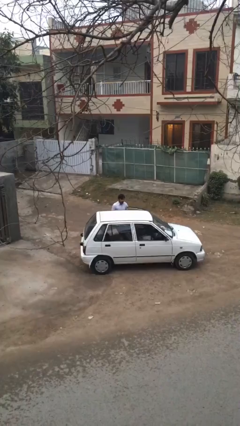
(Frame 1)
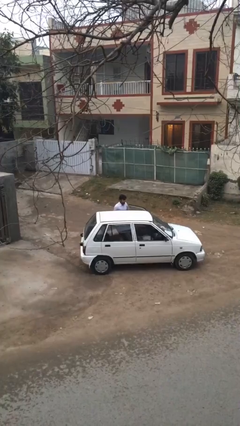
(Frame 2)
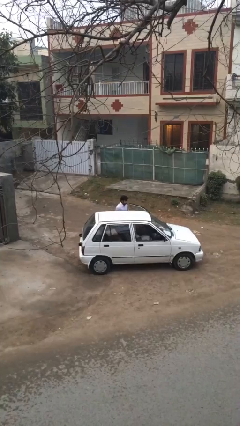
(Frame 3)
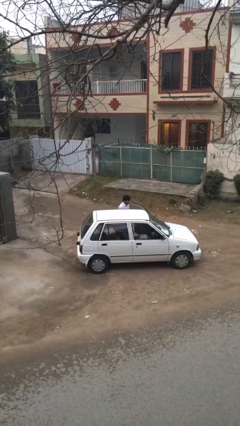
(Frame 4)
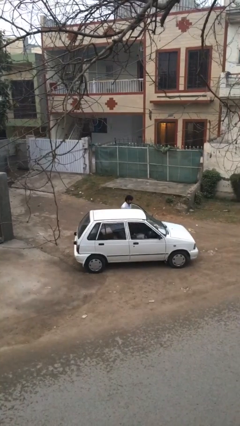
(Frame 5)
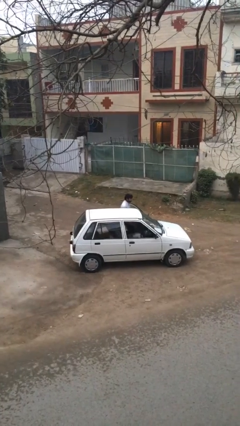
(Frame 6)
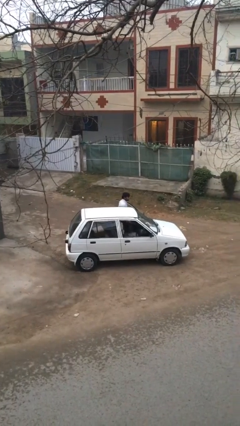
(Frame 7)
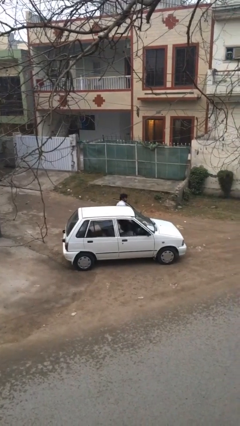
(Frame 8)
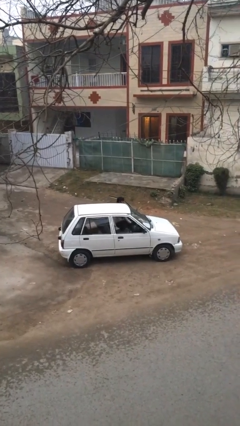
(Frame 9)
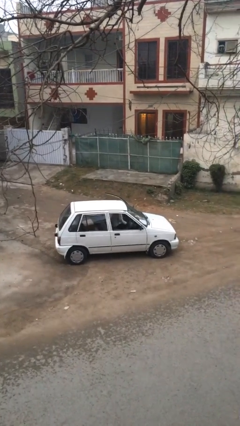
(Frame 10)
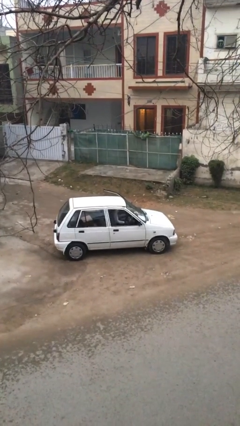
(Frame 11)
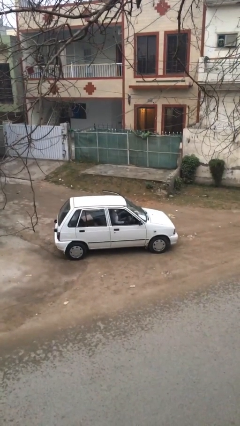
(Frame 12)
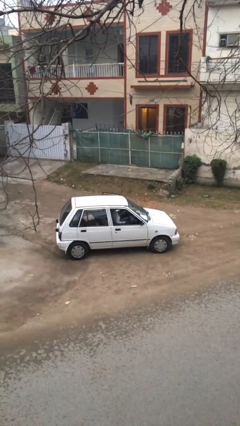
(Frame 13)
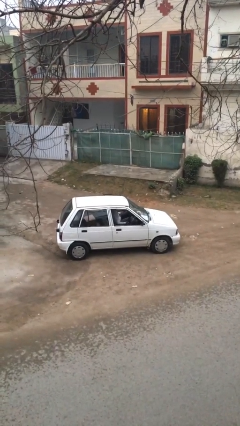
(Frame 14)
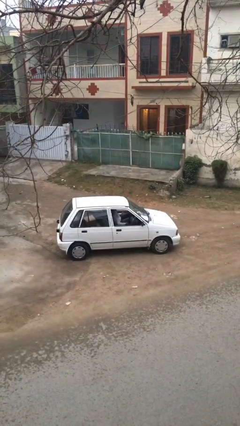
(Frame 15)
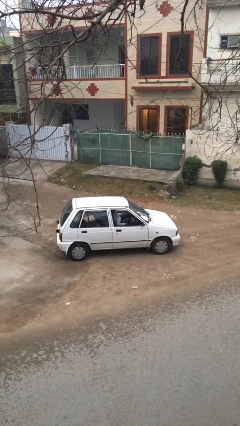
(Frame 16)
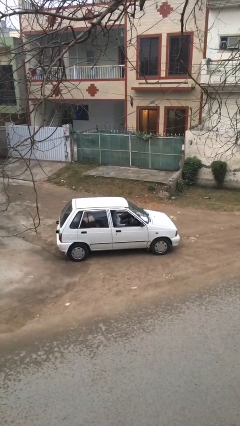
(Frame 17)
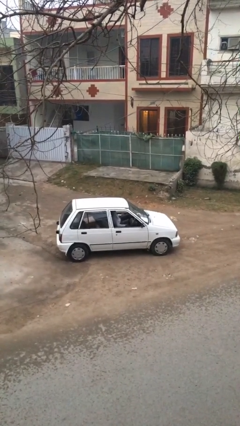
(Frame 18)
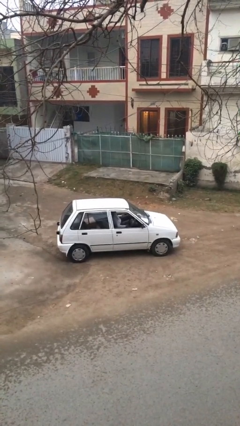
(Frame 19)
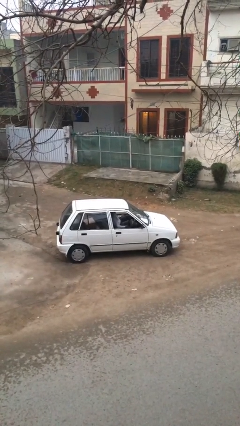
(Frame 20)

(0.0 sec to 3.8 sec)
person enters car

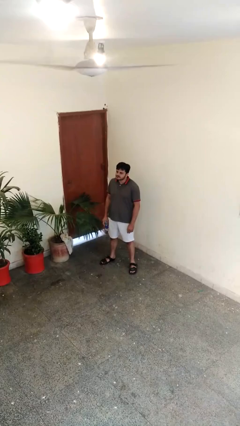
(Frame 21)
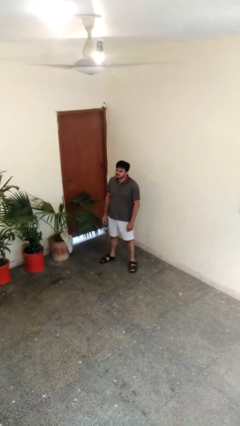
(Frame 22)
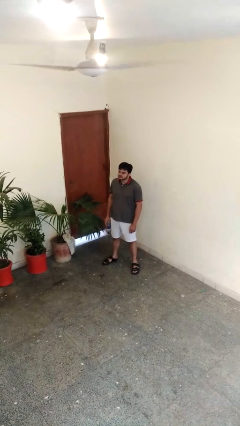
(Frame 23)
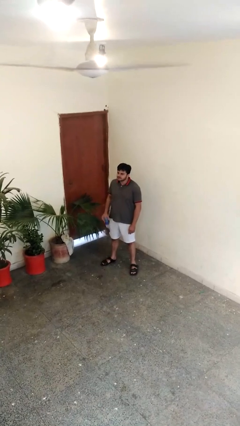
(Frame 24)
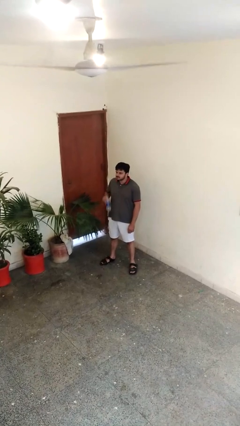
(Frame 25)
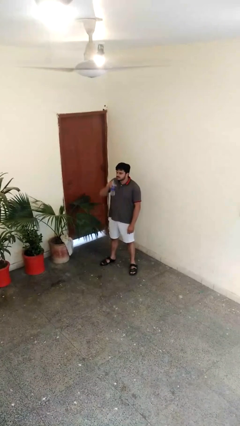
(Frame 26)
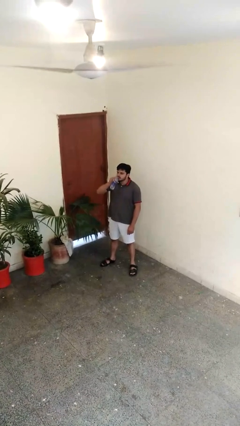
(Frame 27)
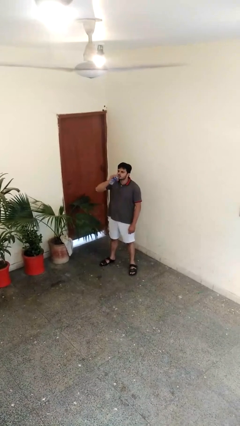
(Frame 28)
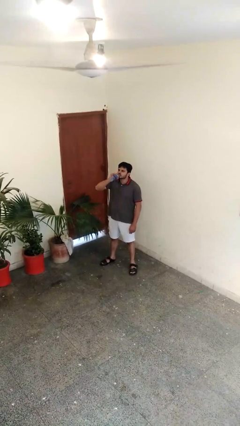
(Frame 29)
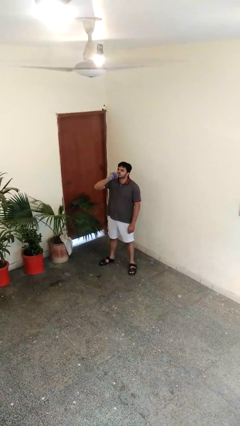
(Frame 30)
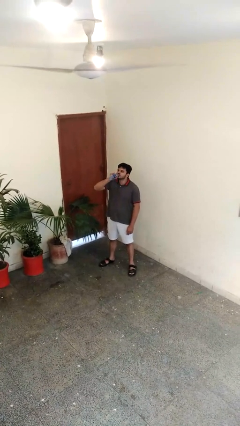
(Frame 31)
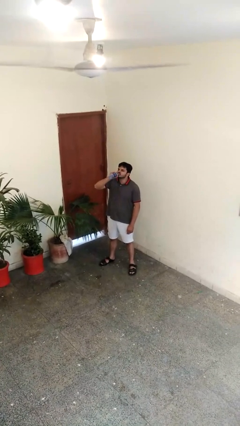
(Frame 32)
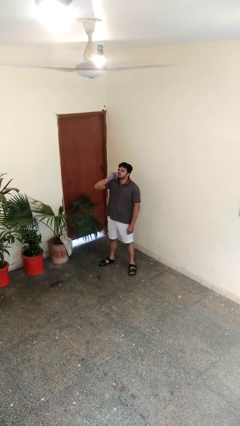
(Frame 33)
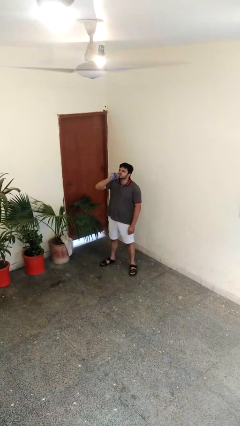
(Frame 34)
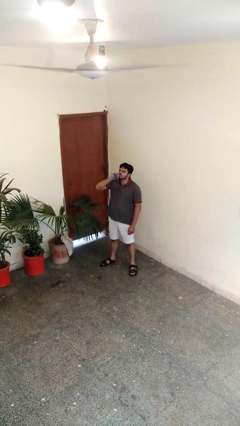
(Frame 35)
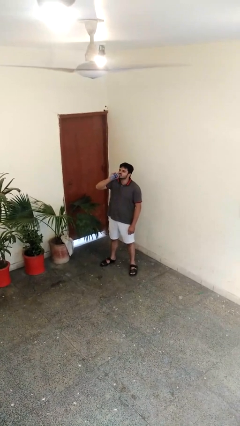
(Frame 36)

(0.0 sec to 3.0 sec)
person drinks from bottle

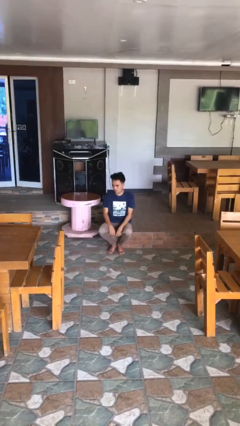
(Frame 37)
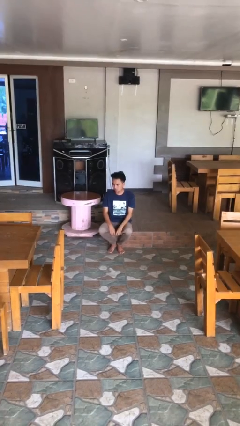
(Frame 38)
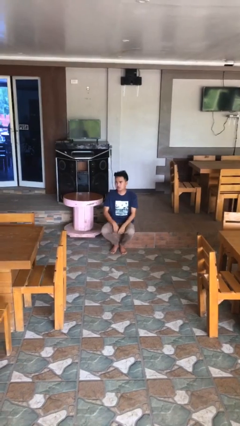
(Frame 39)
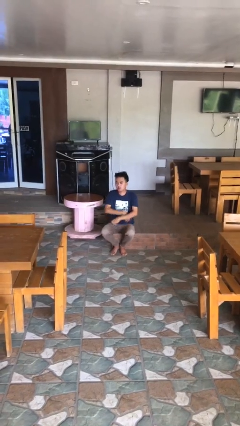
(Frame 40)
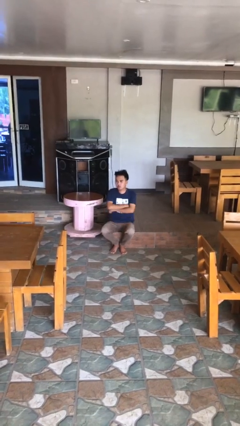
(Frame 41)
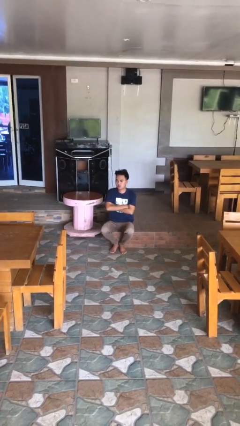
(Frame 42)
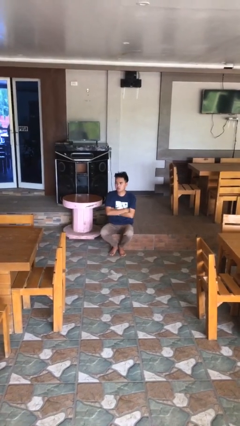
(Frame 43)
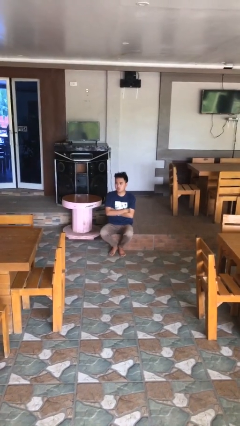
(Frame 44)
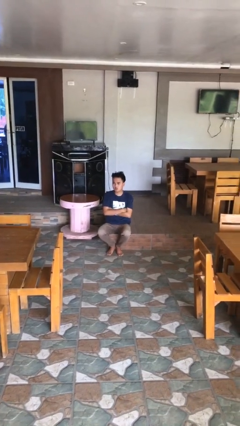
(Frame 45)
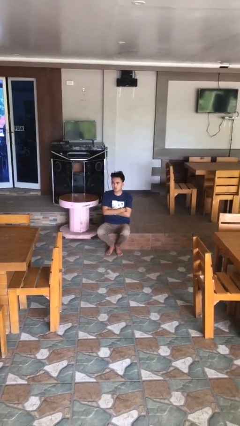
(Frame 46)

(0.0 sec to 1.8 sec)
person crosses arms

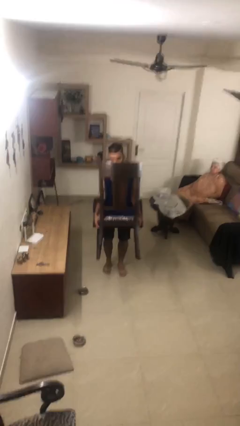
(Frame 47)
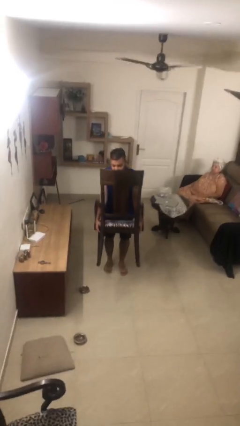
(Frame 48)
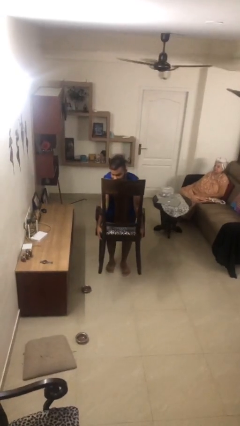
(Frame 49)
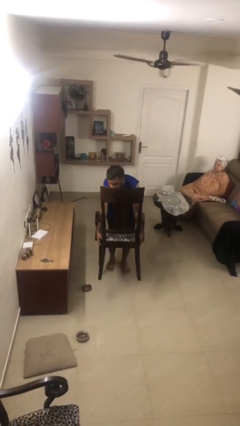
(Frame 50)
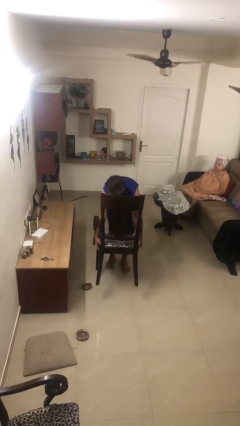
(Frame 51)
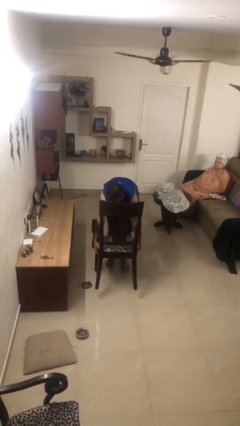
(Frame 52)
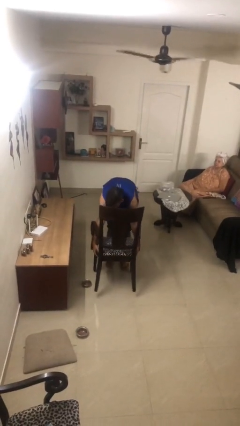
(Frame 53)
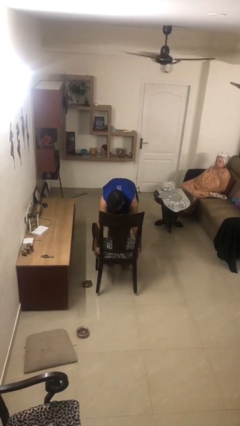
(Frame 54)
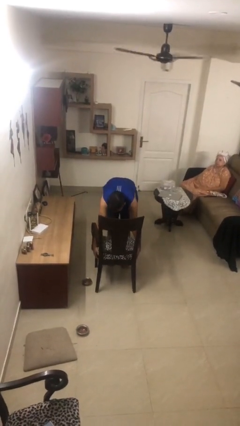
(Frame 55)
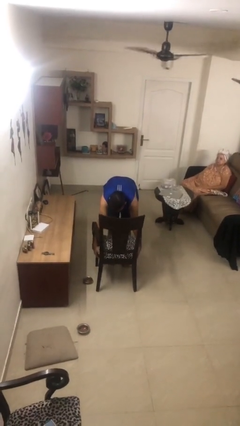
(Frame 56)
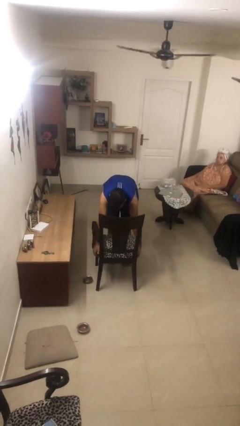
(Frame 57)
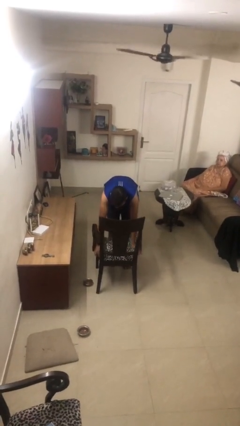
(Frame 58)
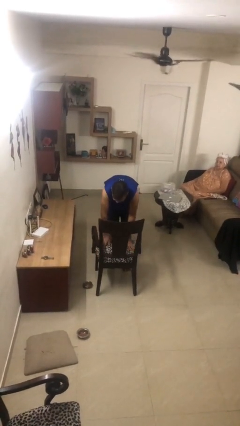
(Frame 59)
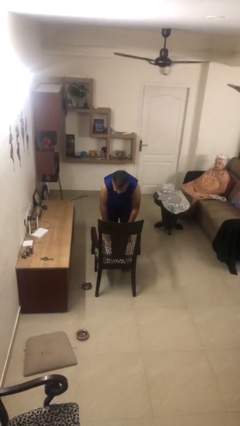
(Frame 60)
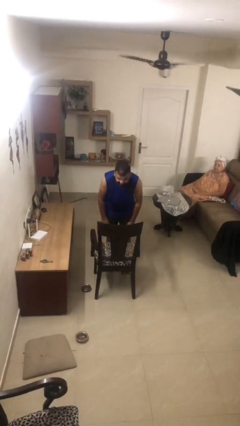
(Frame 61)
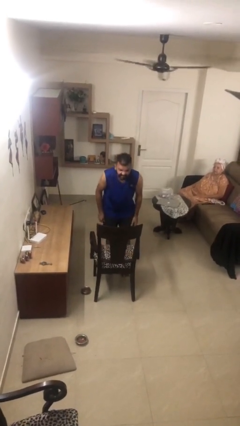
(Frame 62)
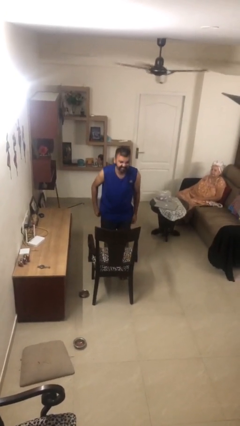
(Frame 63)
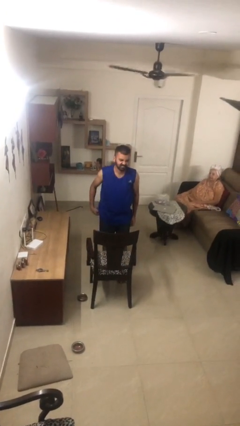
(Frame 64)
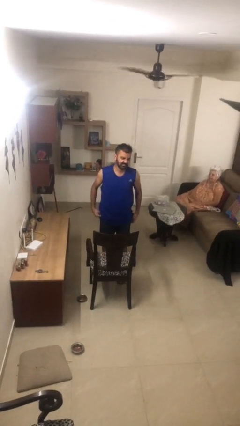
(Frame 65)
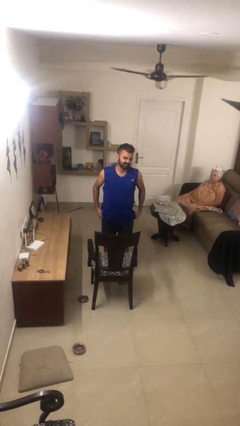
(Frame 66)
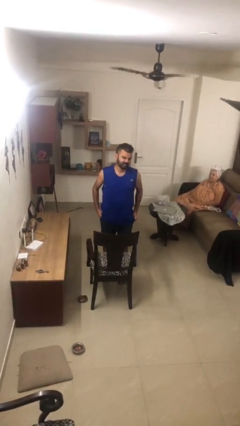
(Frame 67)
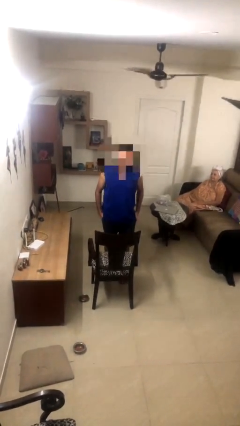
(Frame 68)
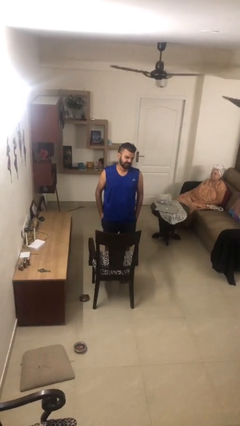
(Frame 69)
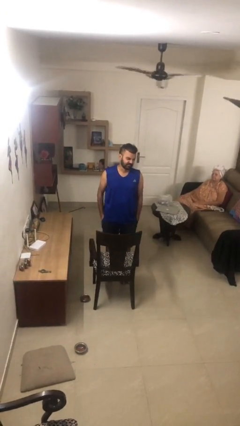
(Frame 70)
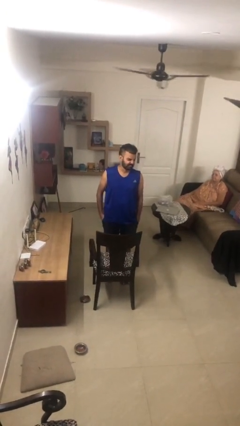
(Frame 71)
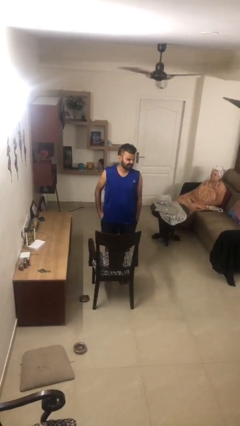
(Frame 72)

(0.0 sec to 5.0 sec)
person puts down object on floor

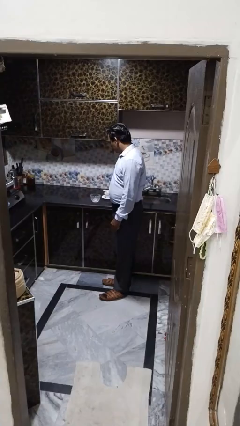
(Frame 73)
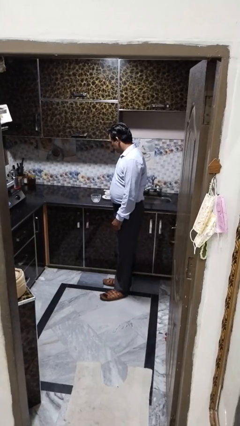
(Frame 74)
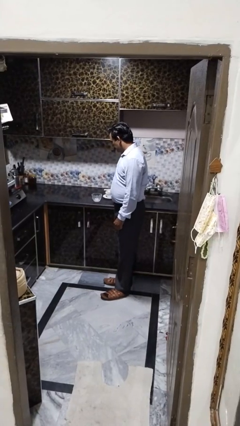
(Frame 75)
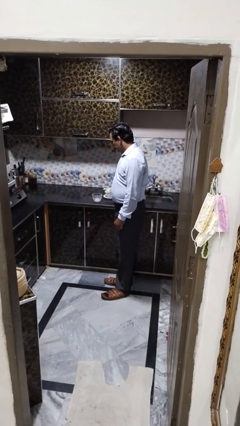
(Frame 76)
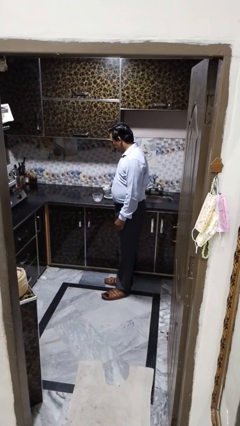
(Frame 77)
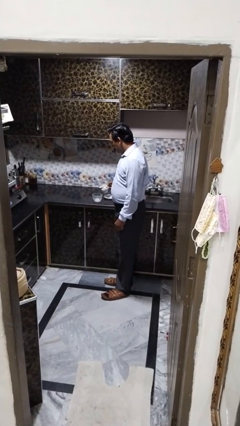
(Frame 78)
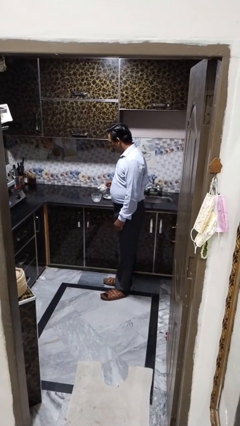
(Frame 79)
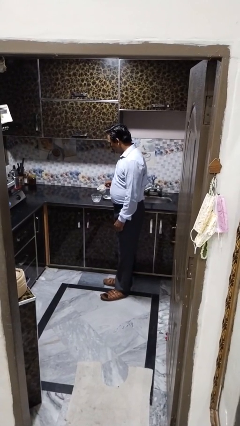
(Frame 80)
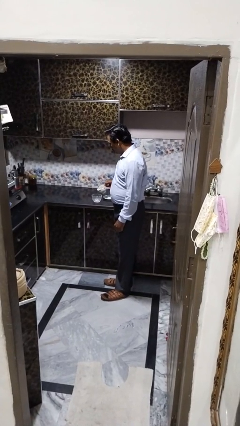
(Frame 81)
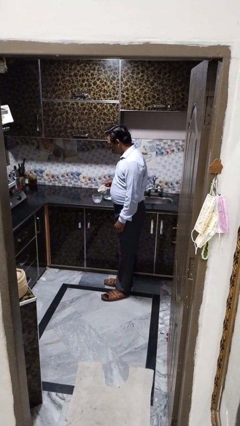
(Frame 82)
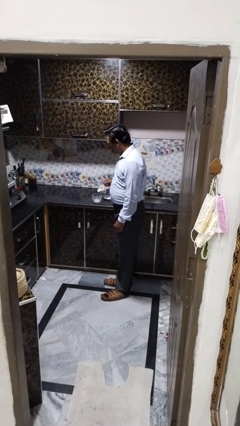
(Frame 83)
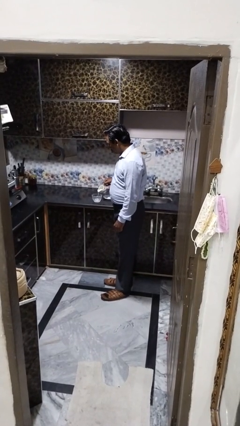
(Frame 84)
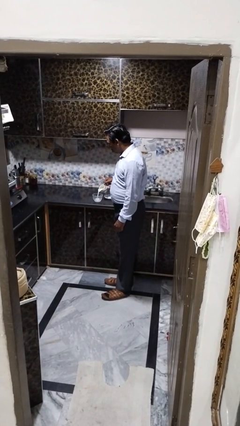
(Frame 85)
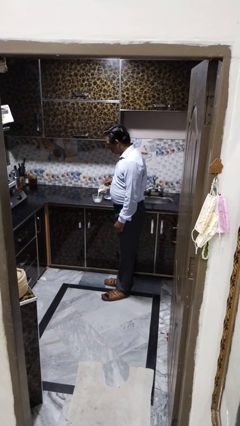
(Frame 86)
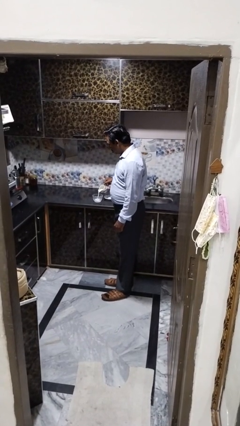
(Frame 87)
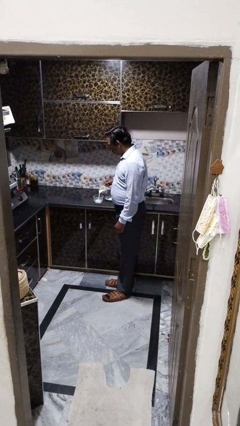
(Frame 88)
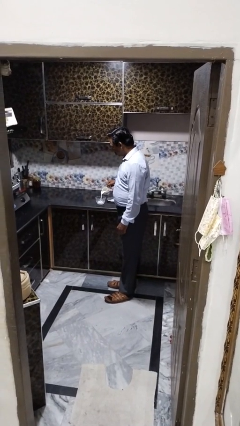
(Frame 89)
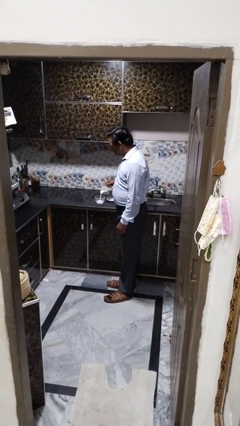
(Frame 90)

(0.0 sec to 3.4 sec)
person pours into bowl

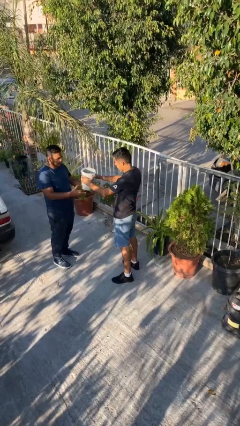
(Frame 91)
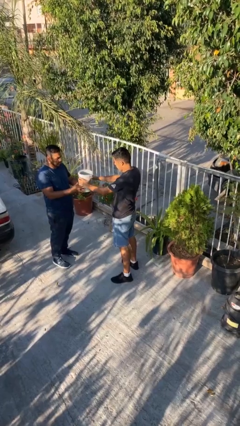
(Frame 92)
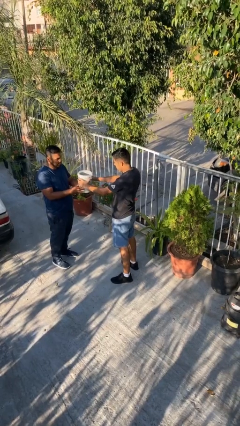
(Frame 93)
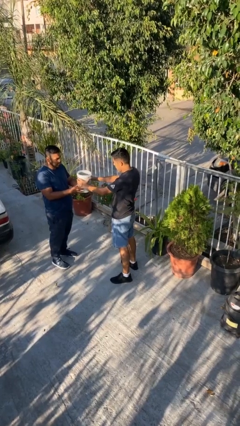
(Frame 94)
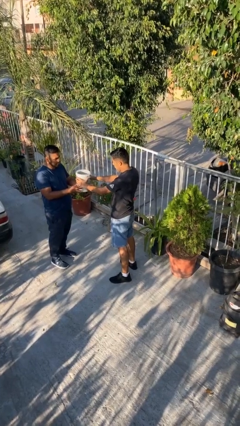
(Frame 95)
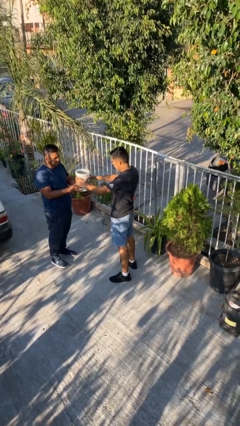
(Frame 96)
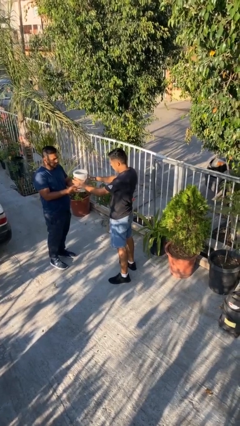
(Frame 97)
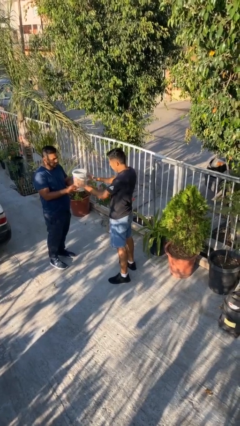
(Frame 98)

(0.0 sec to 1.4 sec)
person transfers object to person
